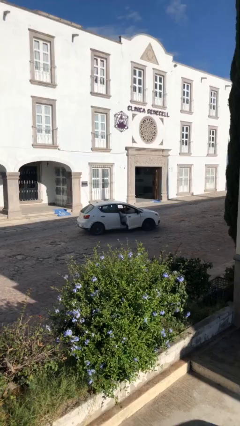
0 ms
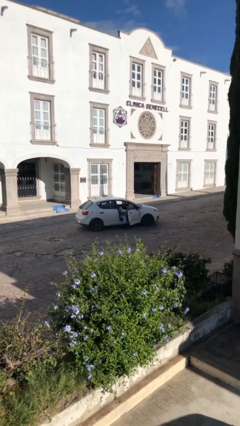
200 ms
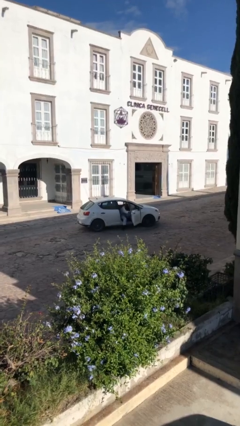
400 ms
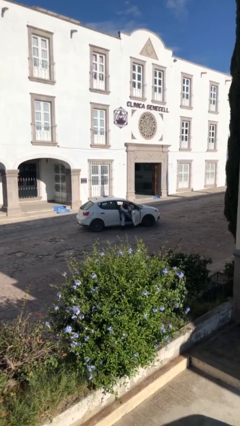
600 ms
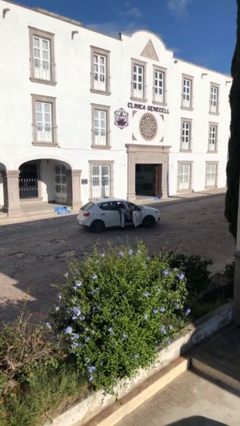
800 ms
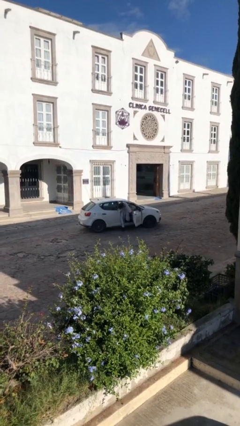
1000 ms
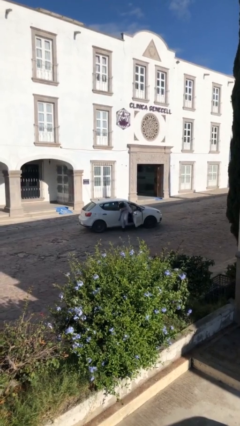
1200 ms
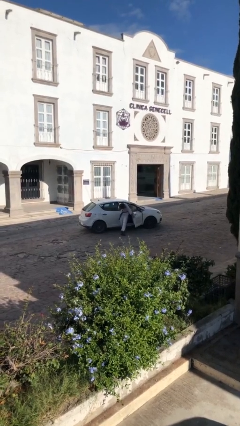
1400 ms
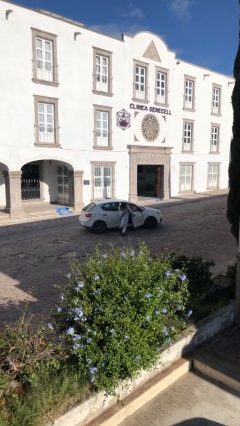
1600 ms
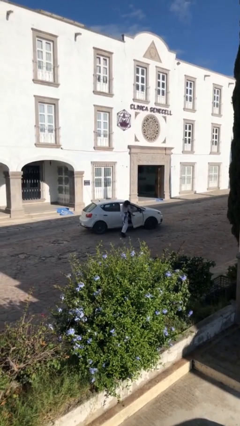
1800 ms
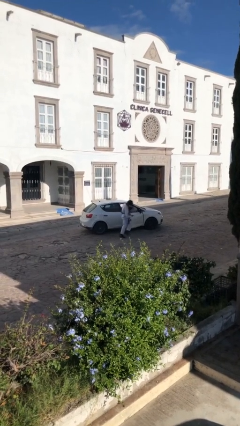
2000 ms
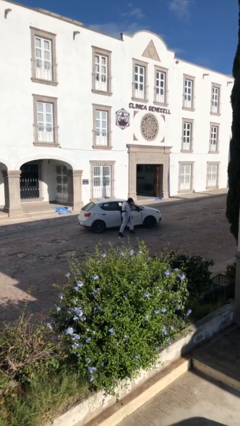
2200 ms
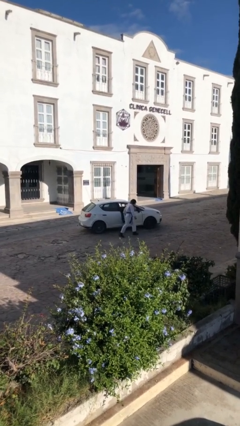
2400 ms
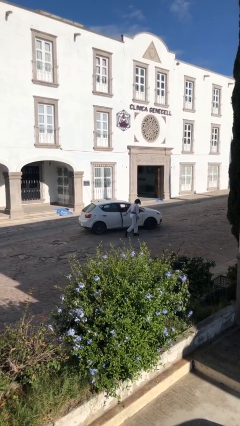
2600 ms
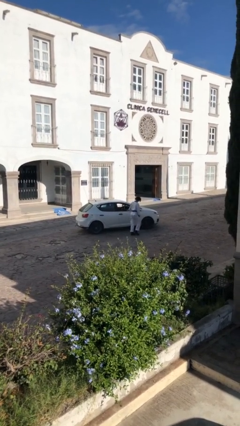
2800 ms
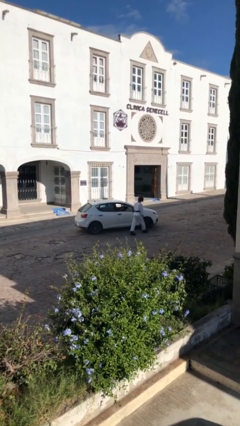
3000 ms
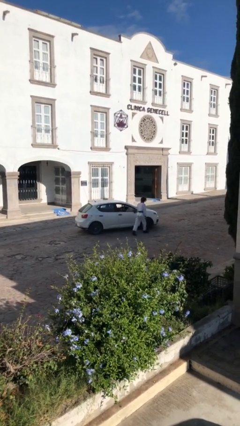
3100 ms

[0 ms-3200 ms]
car drops off person

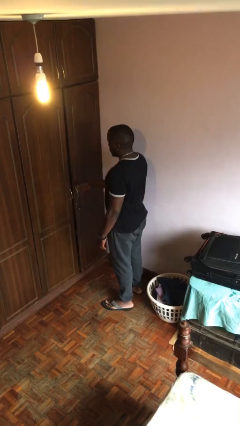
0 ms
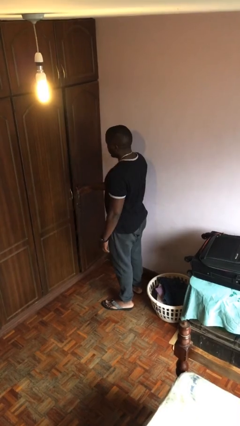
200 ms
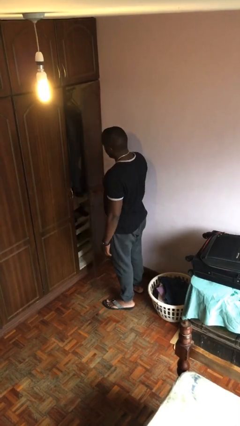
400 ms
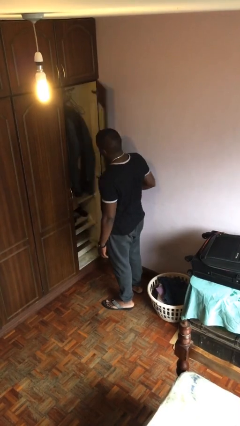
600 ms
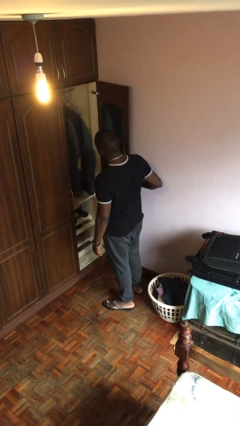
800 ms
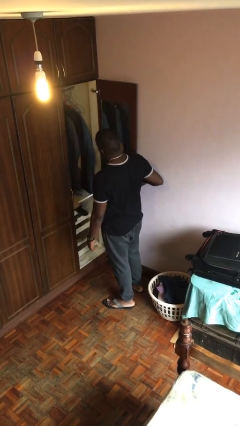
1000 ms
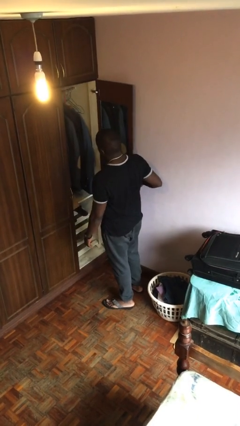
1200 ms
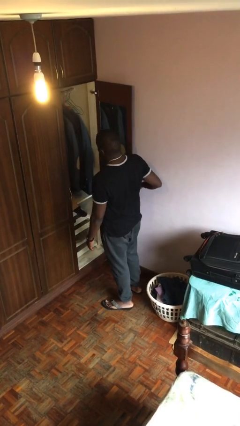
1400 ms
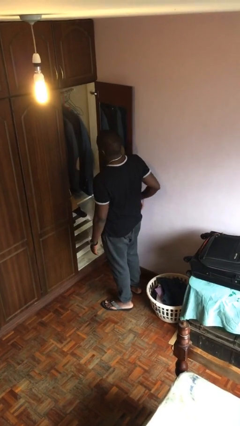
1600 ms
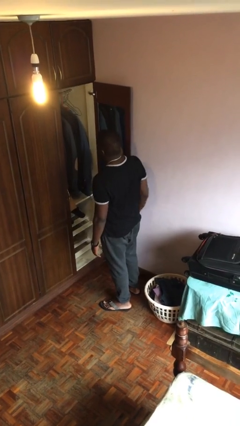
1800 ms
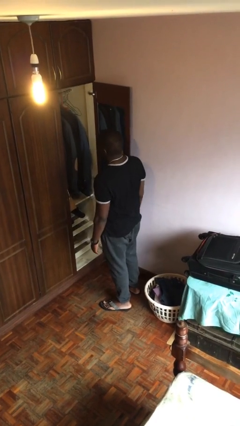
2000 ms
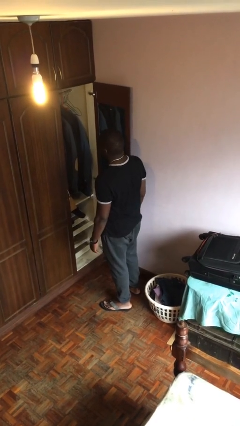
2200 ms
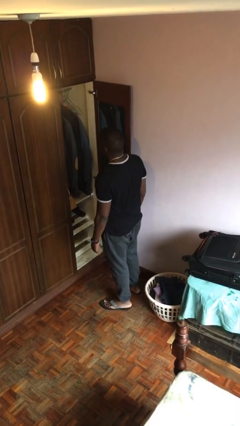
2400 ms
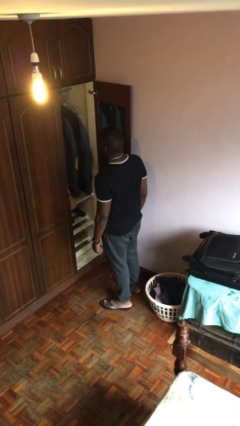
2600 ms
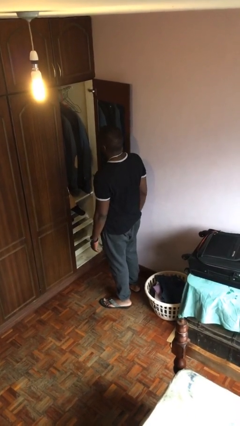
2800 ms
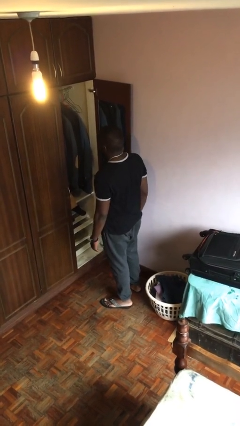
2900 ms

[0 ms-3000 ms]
person opens closet door

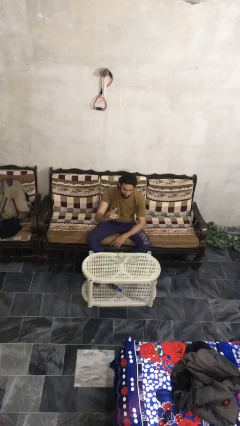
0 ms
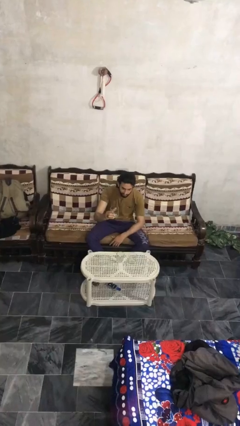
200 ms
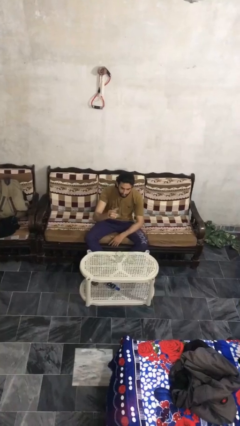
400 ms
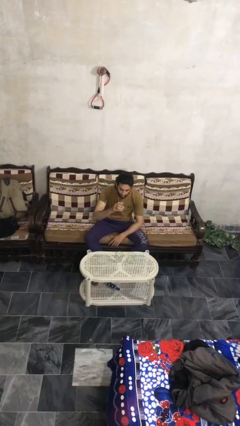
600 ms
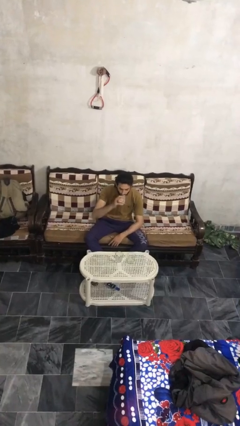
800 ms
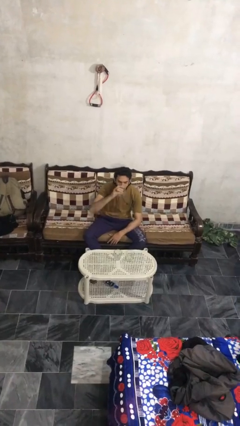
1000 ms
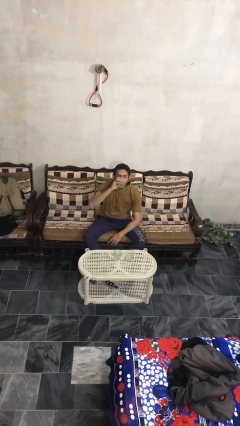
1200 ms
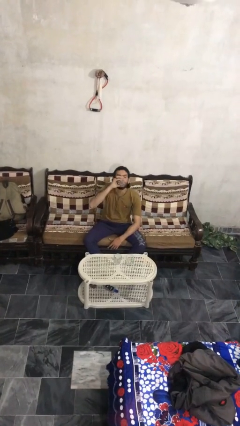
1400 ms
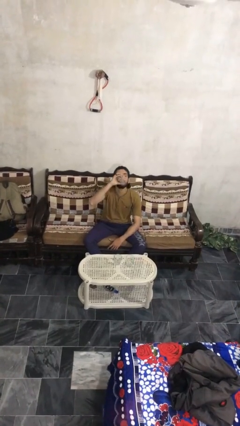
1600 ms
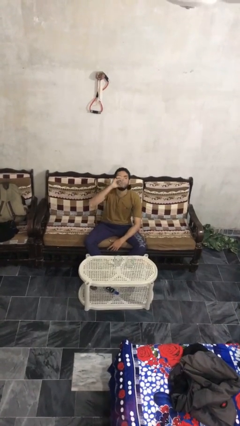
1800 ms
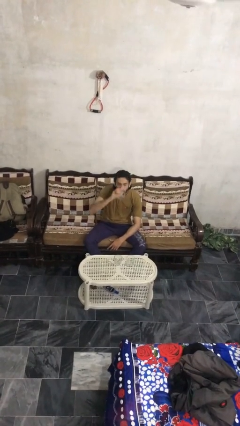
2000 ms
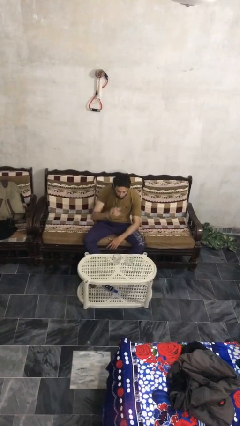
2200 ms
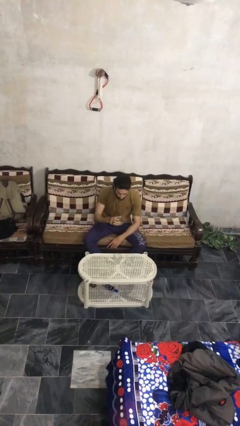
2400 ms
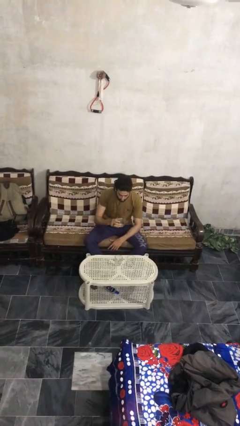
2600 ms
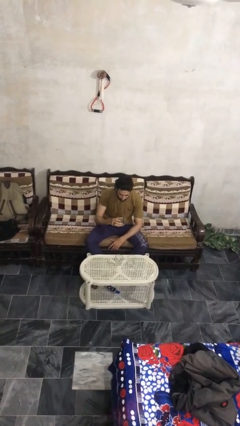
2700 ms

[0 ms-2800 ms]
person drinks from shotglass

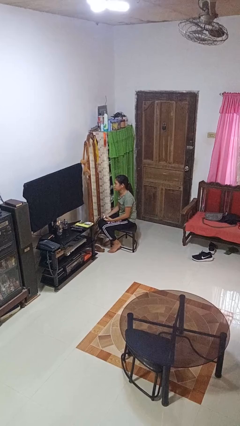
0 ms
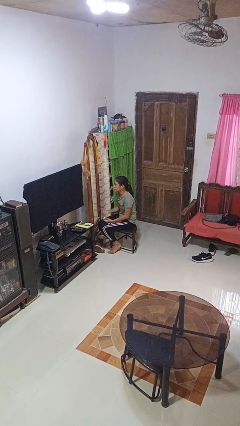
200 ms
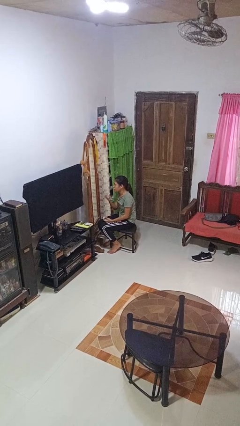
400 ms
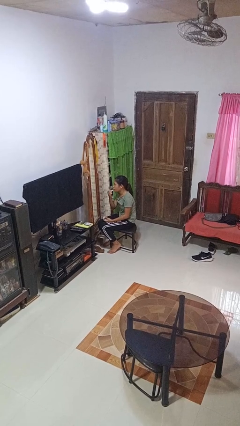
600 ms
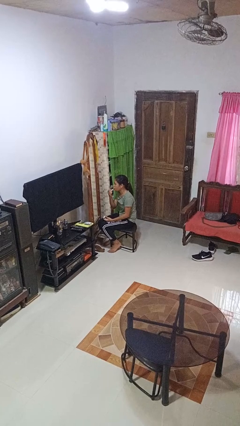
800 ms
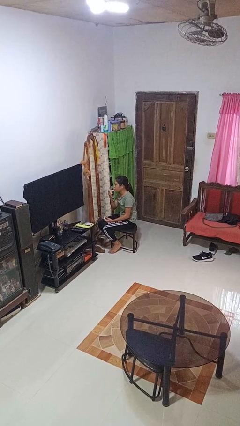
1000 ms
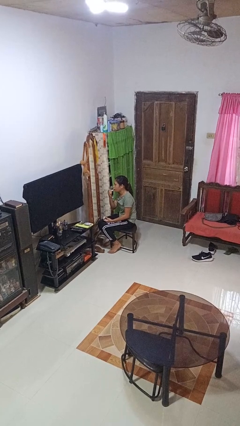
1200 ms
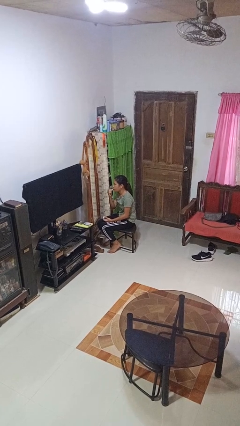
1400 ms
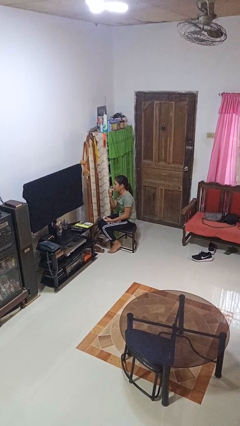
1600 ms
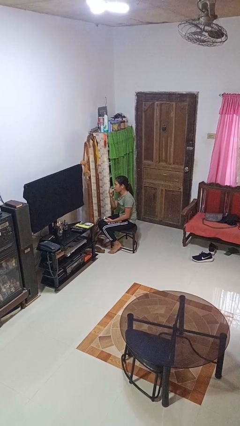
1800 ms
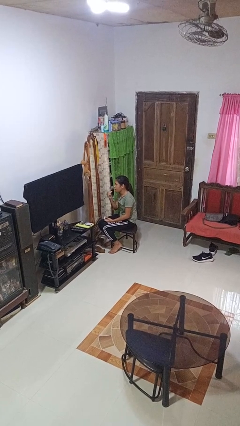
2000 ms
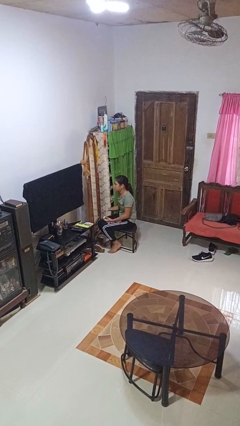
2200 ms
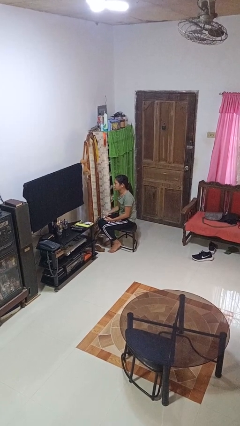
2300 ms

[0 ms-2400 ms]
person applies lip makeup

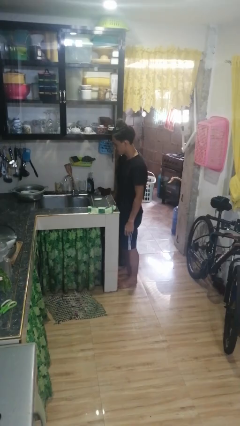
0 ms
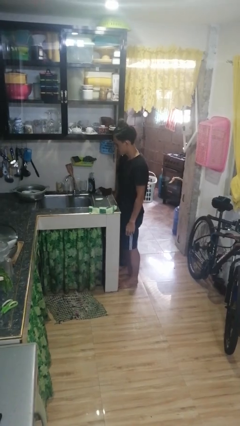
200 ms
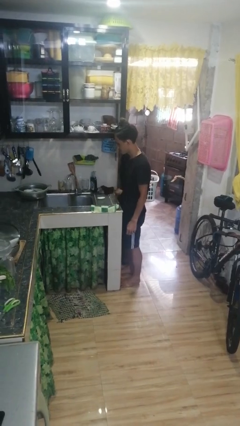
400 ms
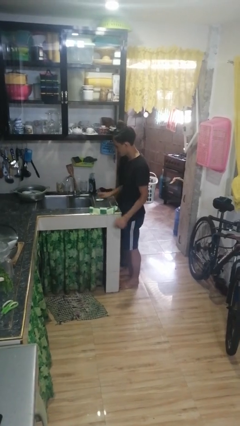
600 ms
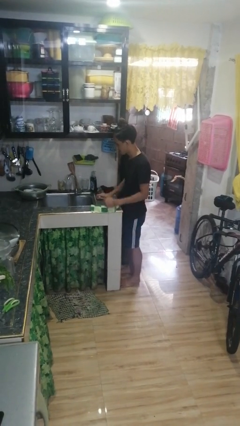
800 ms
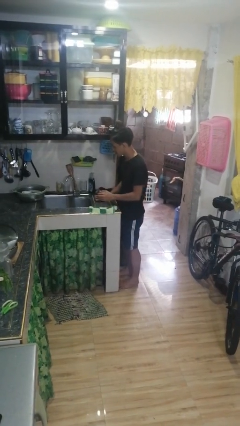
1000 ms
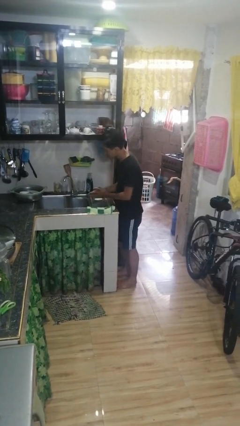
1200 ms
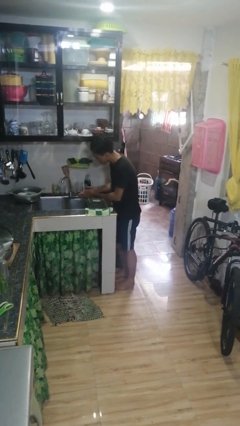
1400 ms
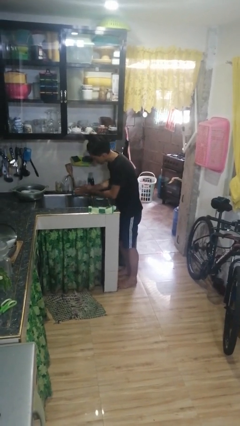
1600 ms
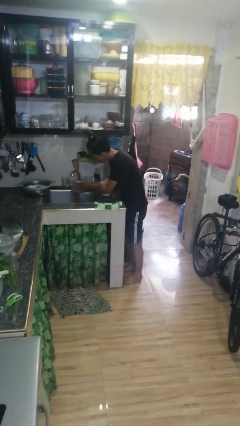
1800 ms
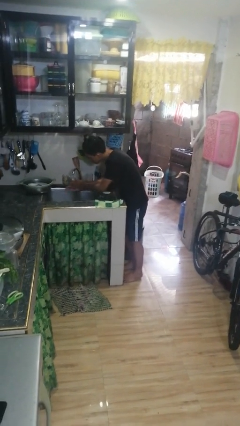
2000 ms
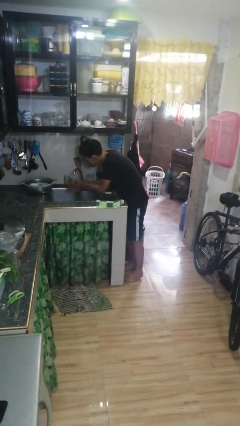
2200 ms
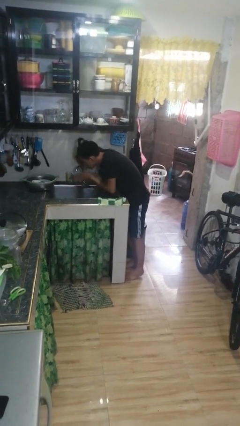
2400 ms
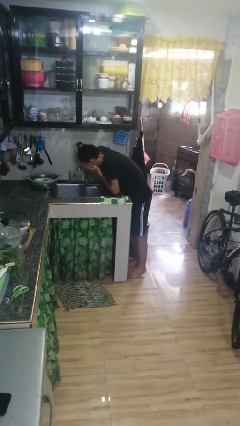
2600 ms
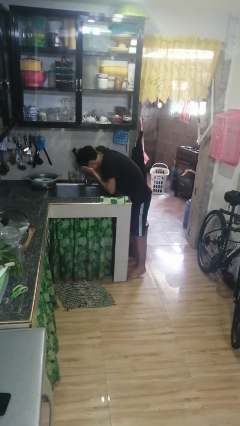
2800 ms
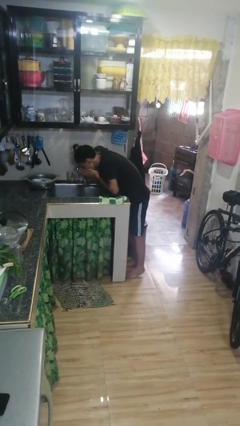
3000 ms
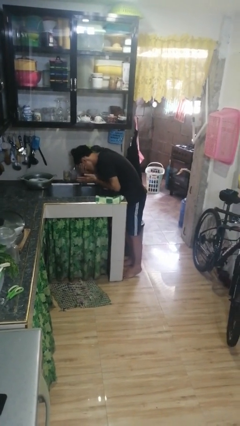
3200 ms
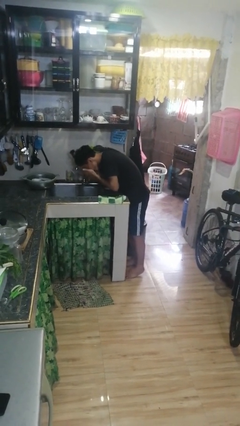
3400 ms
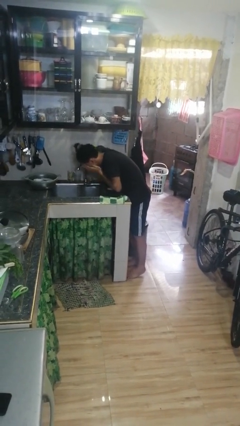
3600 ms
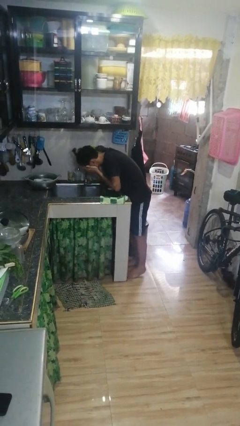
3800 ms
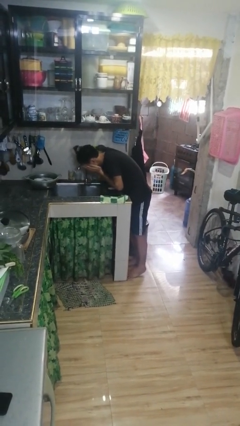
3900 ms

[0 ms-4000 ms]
person washes face

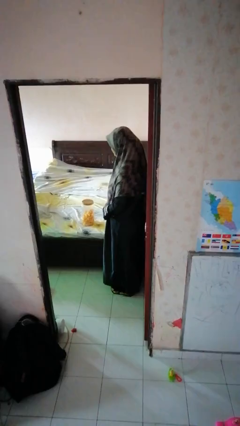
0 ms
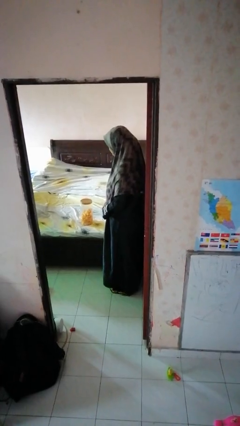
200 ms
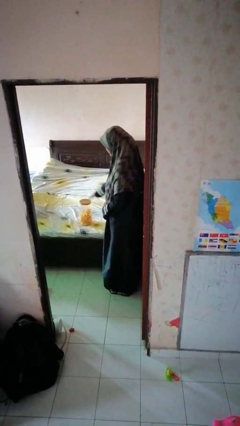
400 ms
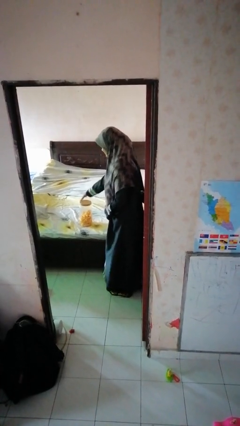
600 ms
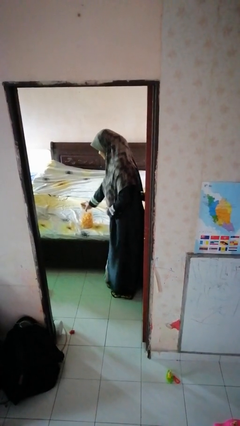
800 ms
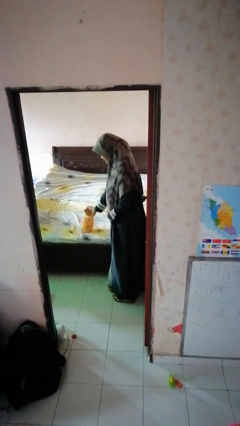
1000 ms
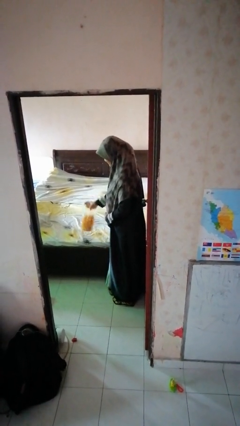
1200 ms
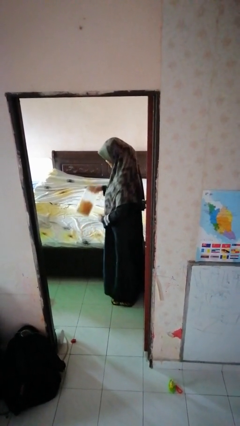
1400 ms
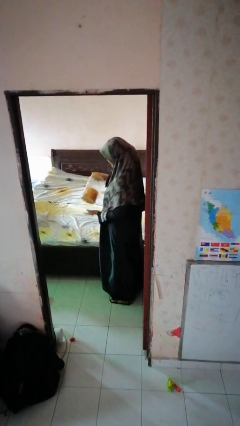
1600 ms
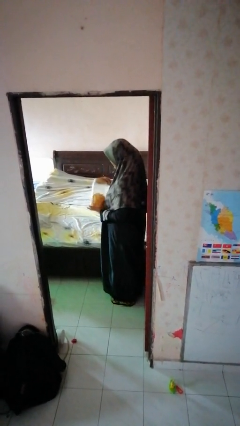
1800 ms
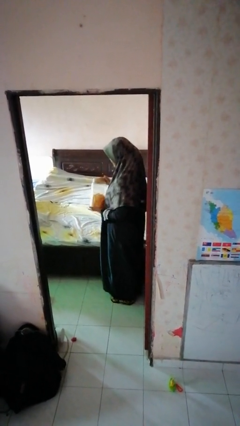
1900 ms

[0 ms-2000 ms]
person picks up object from bed

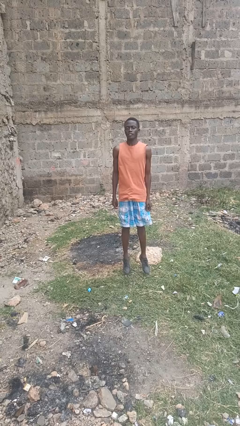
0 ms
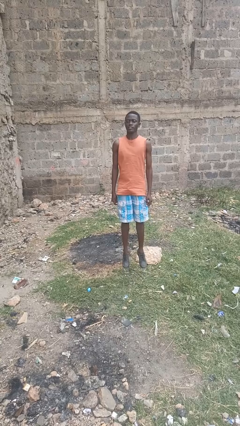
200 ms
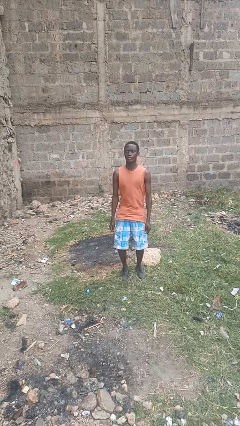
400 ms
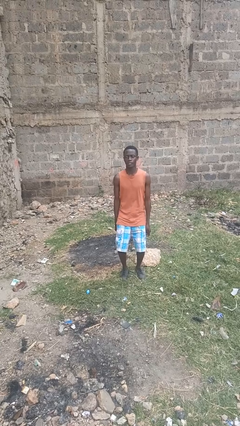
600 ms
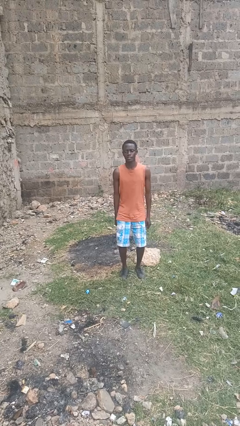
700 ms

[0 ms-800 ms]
person jumps
